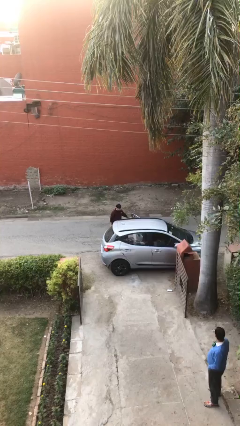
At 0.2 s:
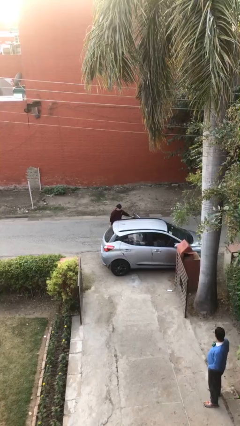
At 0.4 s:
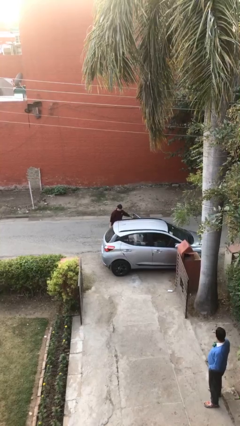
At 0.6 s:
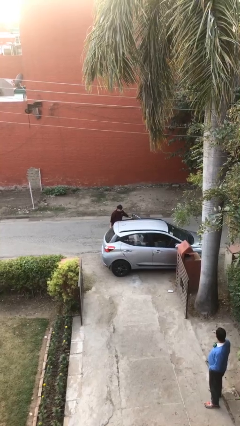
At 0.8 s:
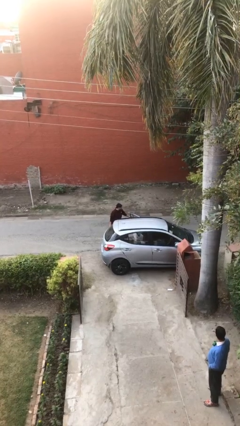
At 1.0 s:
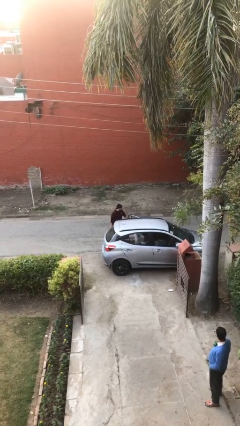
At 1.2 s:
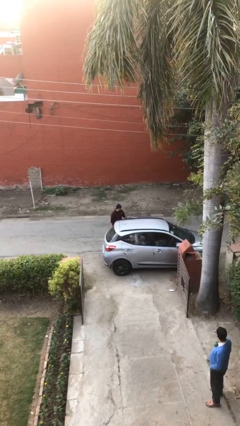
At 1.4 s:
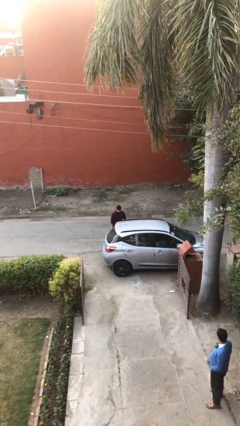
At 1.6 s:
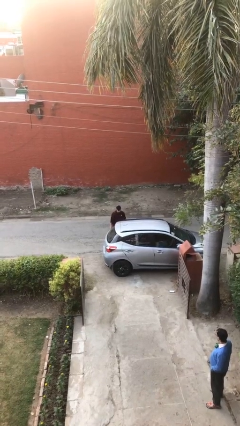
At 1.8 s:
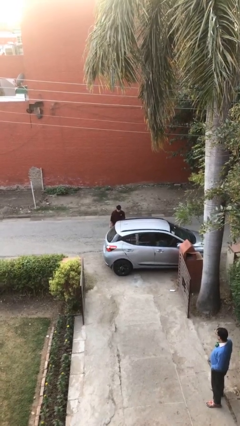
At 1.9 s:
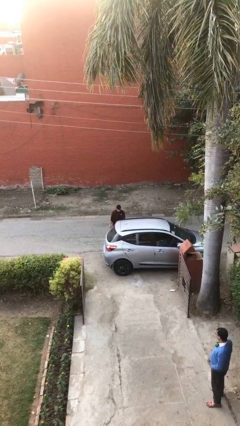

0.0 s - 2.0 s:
person closes car door

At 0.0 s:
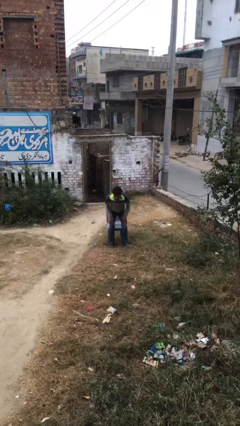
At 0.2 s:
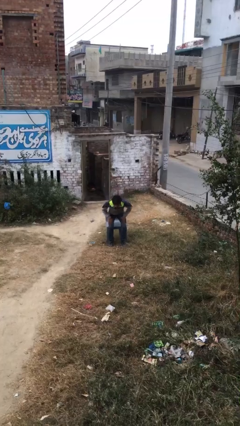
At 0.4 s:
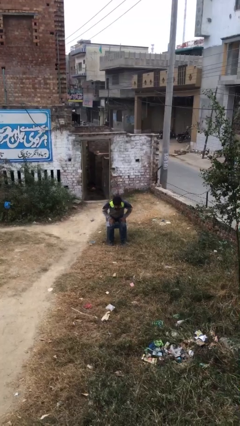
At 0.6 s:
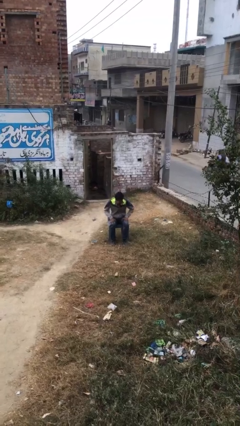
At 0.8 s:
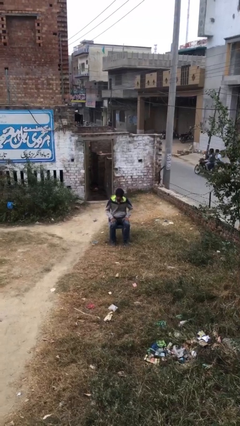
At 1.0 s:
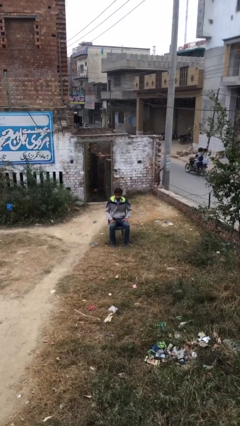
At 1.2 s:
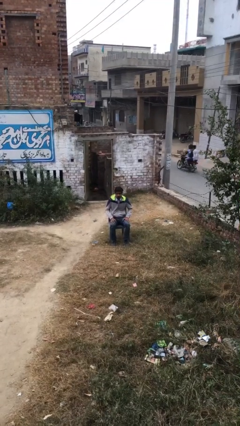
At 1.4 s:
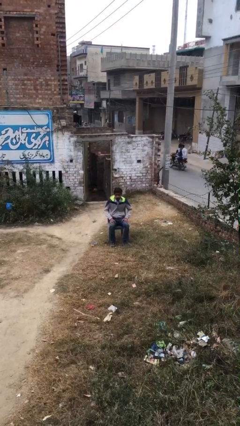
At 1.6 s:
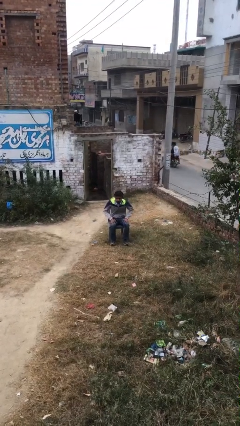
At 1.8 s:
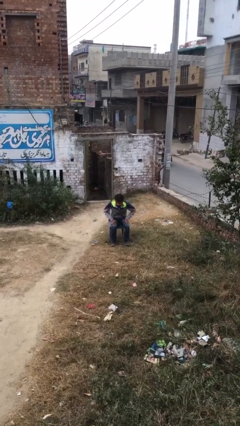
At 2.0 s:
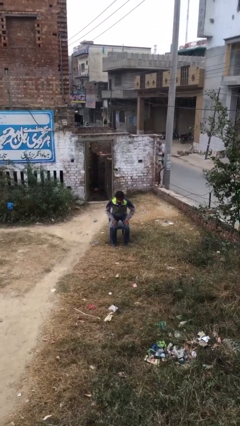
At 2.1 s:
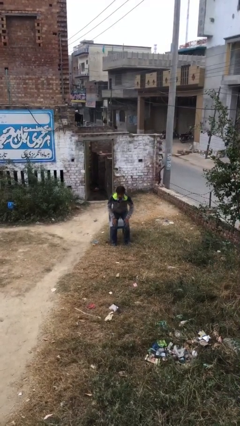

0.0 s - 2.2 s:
person sits down

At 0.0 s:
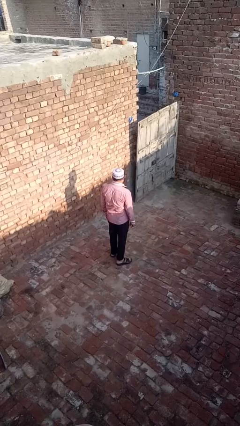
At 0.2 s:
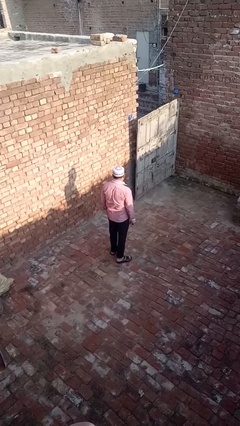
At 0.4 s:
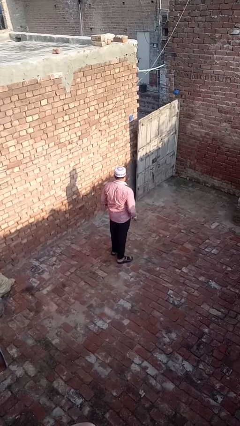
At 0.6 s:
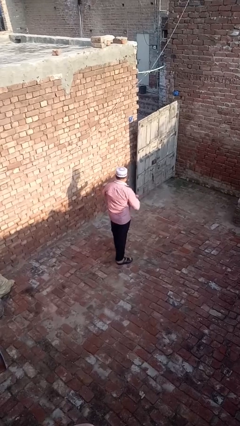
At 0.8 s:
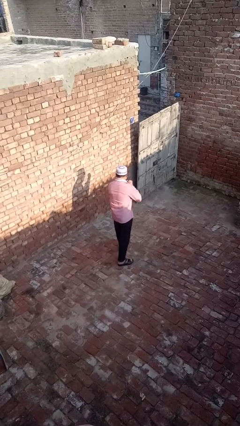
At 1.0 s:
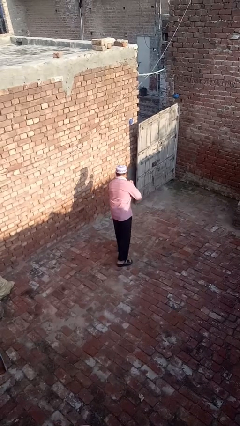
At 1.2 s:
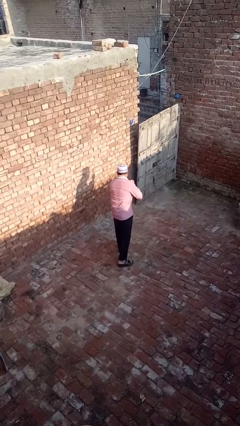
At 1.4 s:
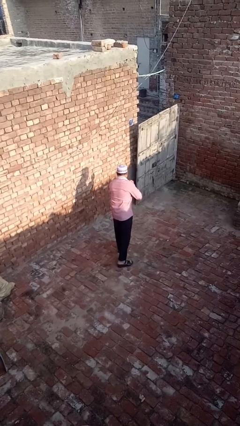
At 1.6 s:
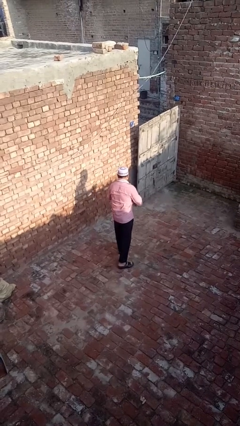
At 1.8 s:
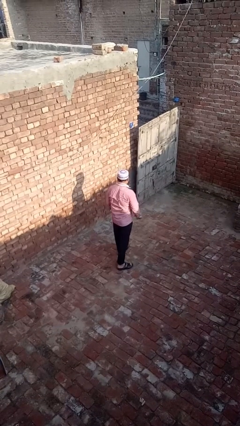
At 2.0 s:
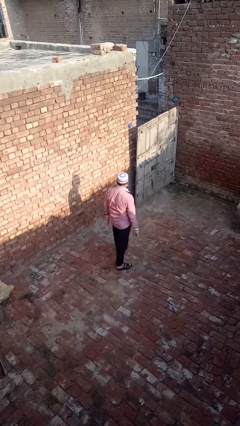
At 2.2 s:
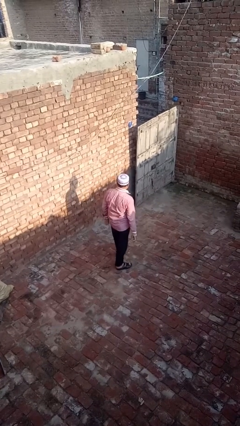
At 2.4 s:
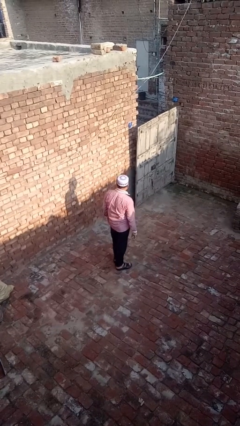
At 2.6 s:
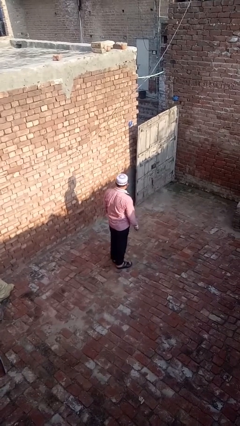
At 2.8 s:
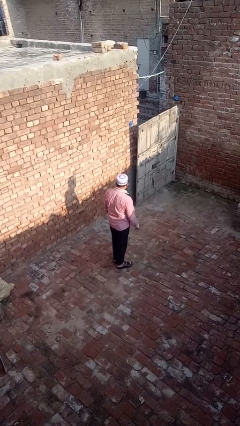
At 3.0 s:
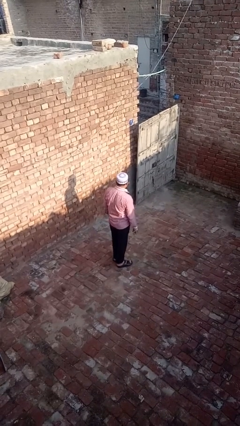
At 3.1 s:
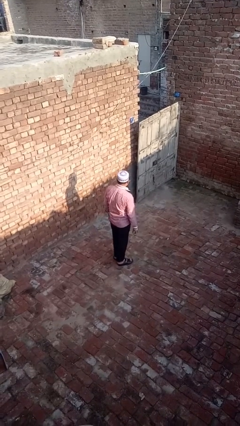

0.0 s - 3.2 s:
person karate chop

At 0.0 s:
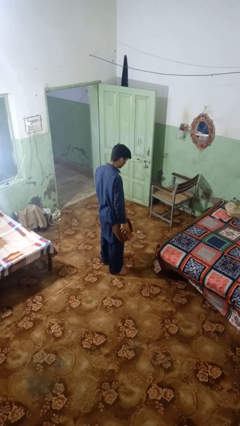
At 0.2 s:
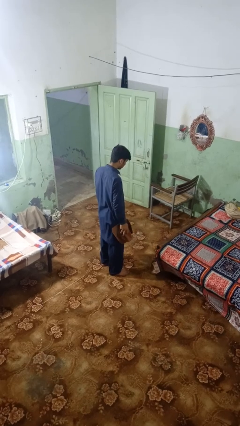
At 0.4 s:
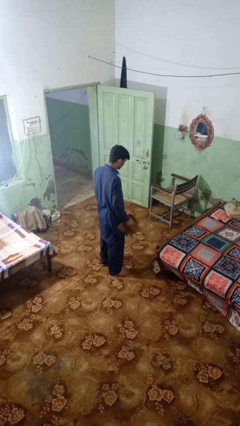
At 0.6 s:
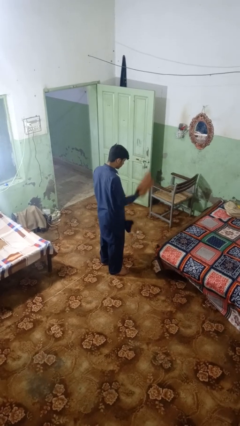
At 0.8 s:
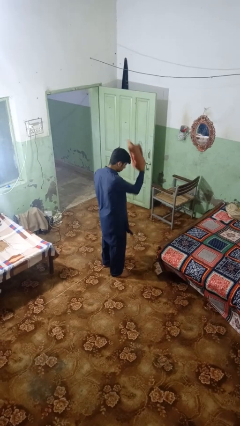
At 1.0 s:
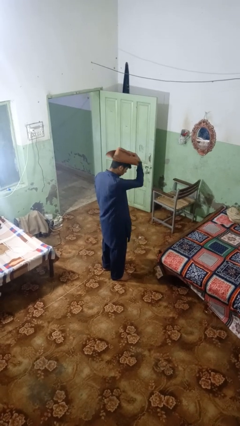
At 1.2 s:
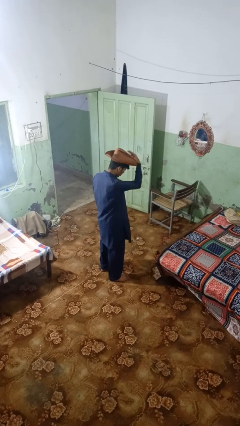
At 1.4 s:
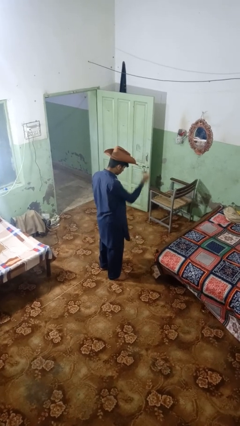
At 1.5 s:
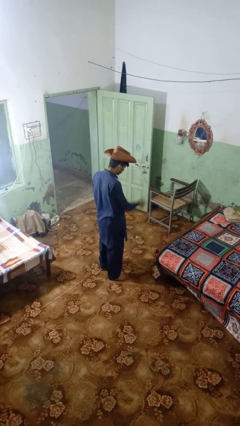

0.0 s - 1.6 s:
person puts on hat

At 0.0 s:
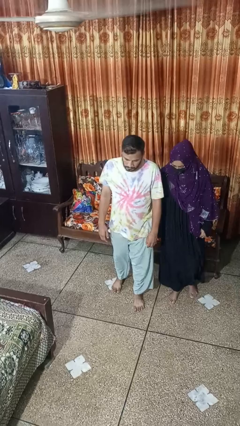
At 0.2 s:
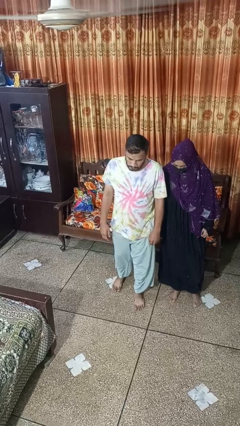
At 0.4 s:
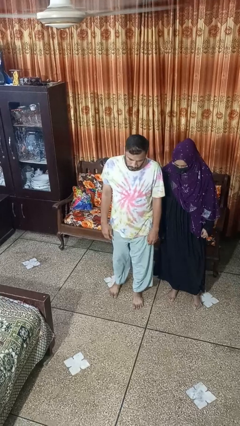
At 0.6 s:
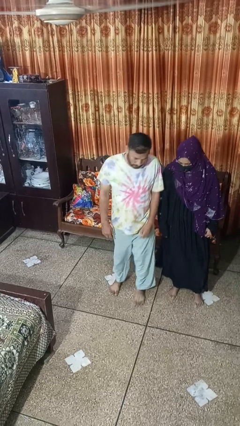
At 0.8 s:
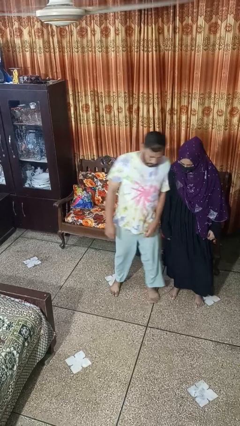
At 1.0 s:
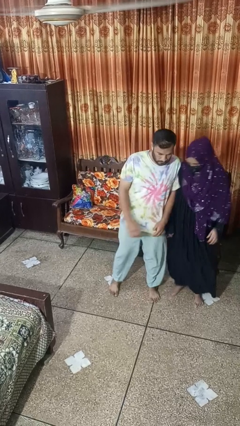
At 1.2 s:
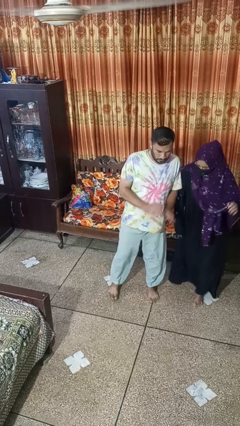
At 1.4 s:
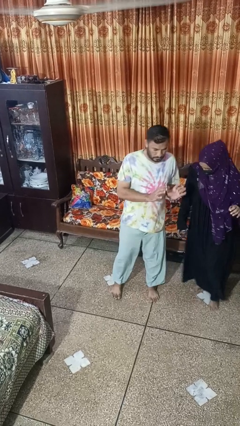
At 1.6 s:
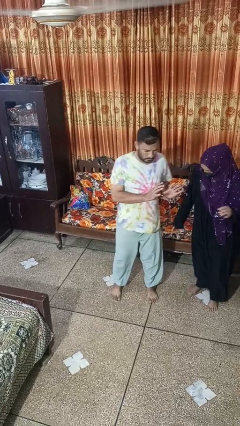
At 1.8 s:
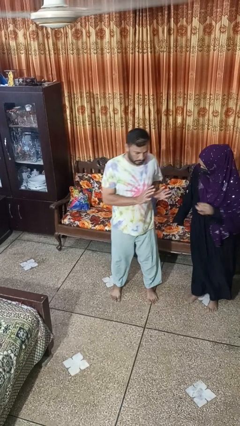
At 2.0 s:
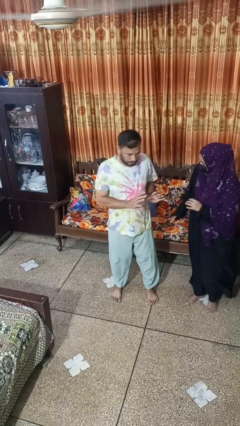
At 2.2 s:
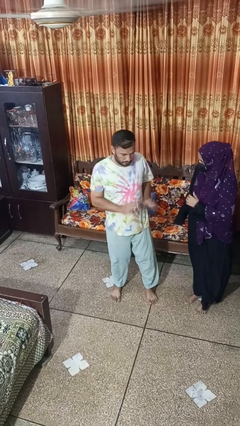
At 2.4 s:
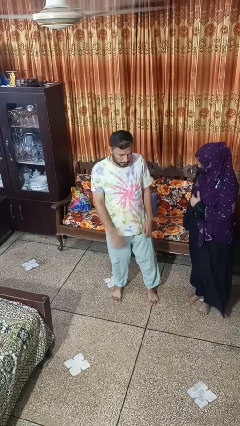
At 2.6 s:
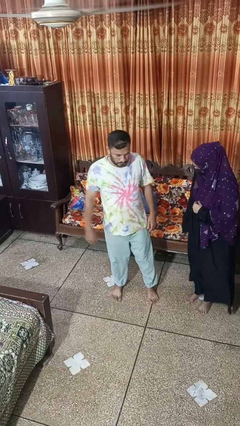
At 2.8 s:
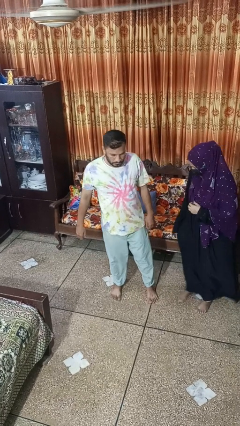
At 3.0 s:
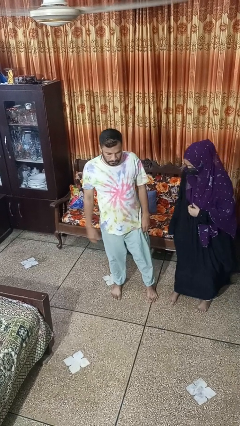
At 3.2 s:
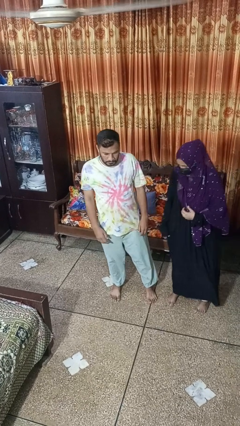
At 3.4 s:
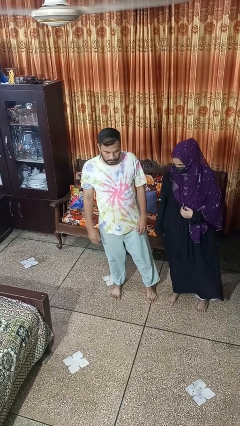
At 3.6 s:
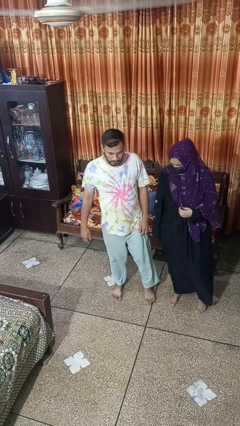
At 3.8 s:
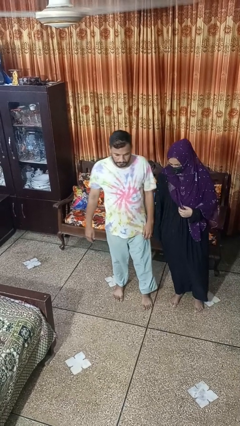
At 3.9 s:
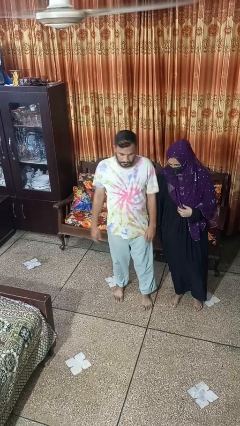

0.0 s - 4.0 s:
person bumps into person

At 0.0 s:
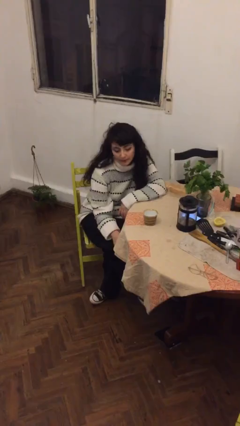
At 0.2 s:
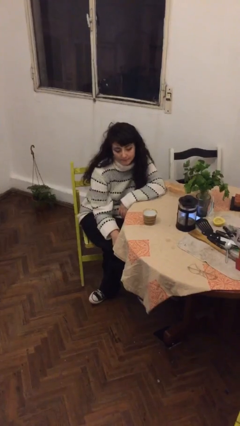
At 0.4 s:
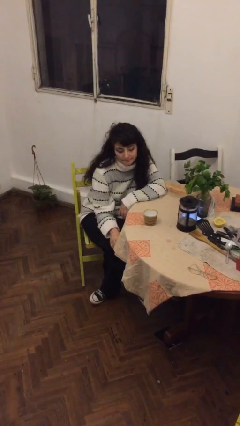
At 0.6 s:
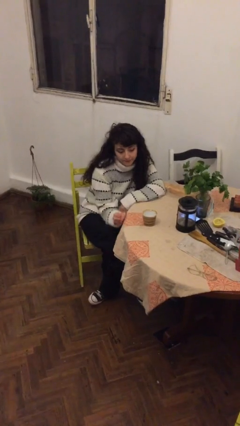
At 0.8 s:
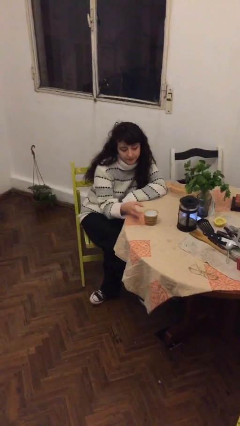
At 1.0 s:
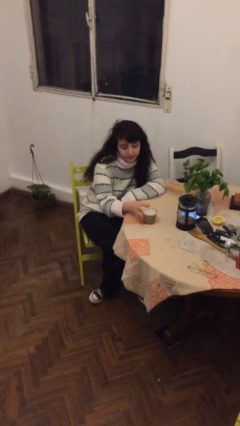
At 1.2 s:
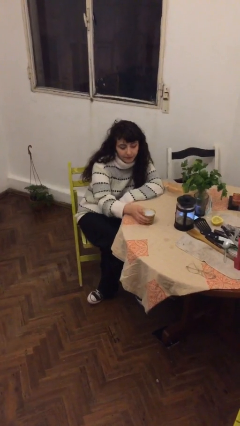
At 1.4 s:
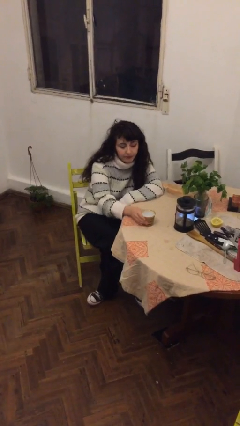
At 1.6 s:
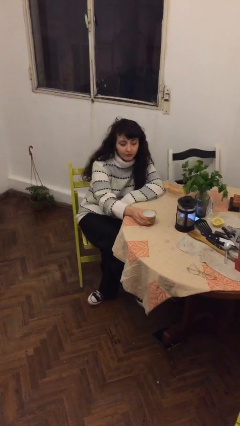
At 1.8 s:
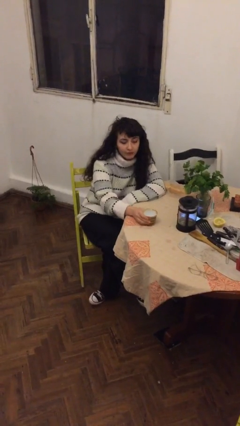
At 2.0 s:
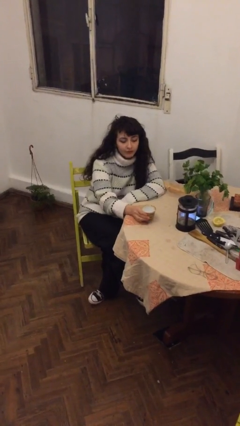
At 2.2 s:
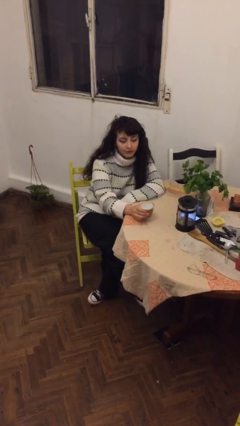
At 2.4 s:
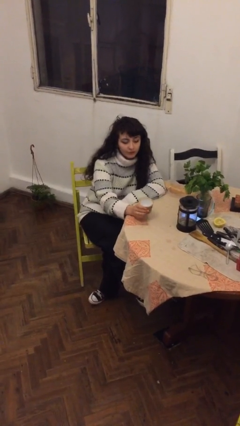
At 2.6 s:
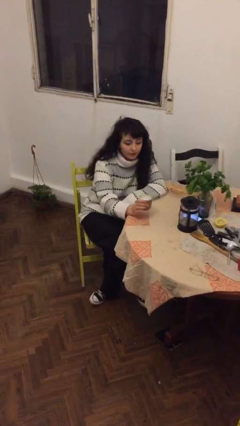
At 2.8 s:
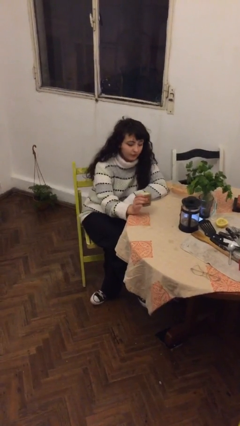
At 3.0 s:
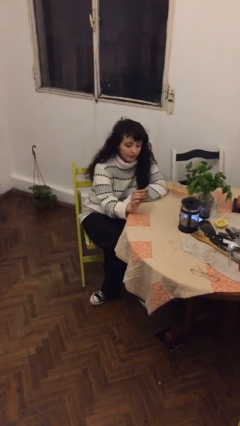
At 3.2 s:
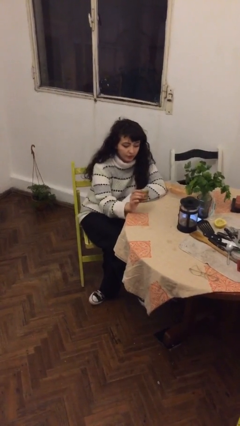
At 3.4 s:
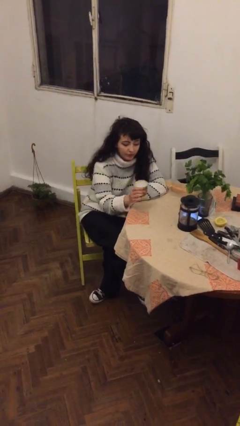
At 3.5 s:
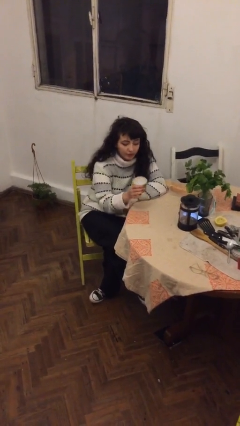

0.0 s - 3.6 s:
person picks up object from table

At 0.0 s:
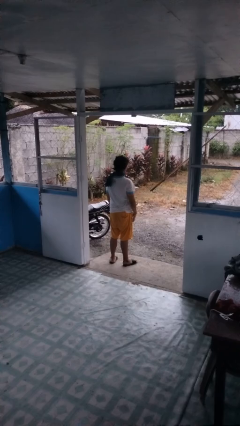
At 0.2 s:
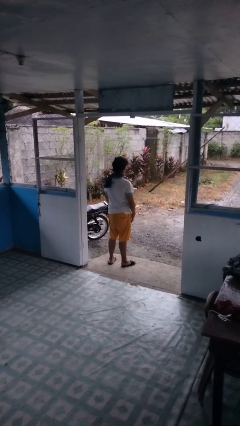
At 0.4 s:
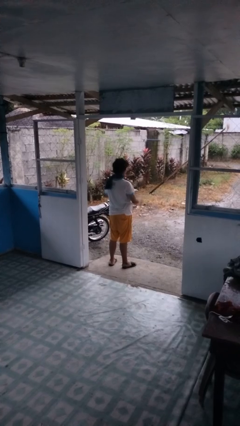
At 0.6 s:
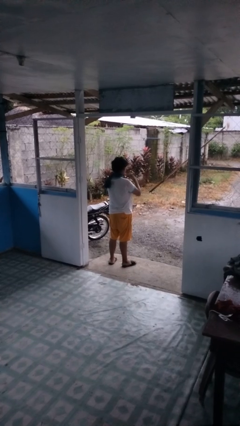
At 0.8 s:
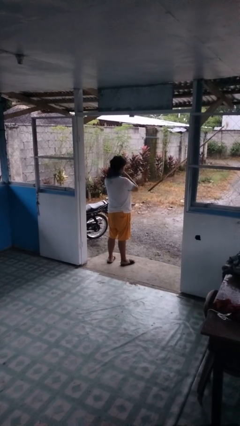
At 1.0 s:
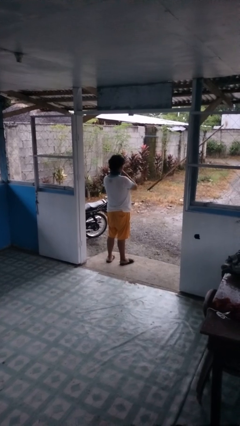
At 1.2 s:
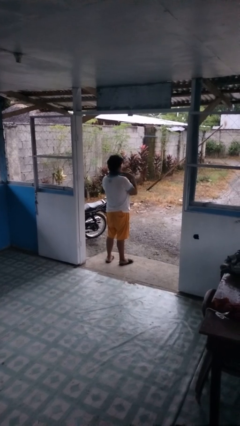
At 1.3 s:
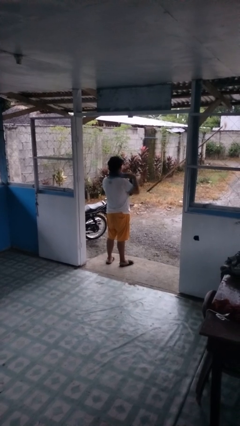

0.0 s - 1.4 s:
person takes off scarf
